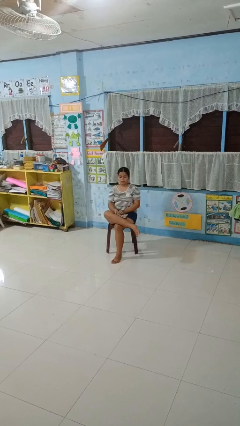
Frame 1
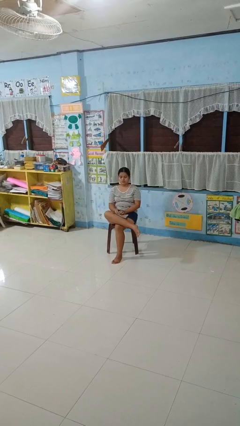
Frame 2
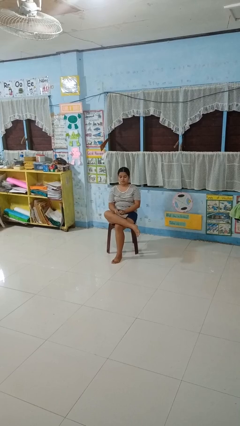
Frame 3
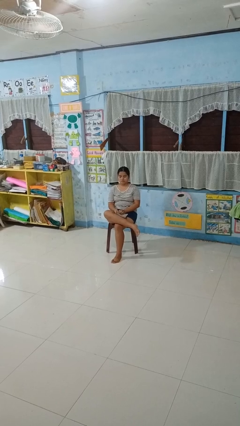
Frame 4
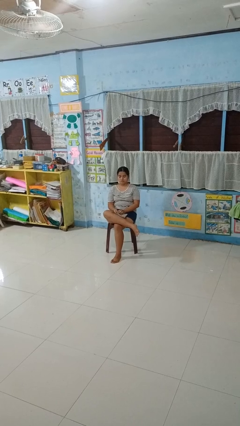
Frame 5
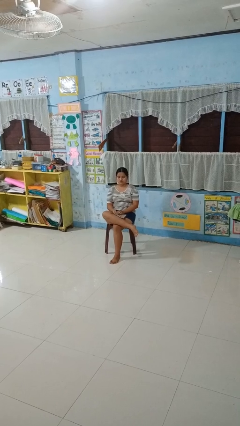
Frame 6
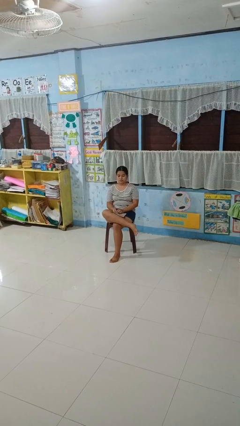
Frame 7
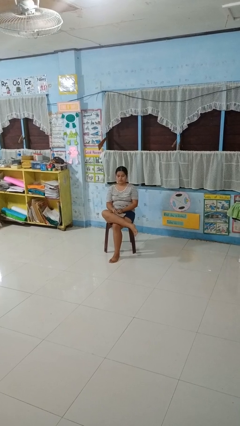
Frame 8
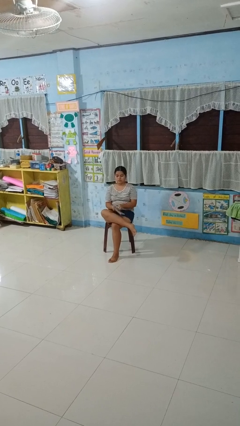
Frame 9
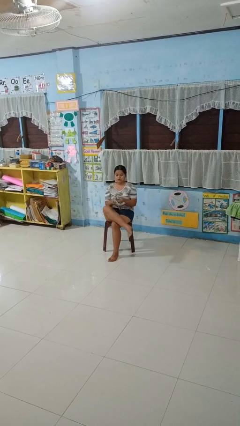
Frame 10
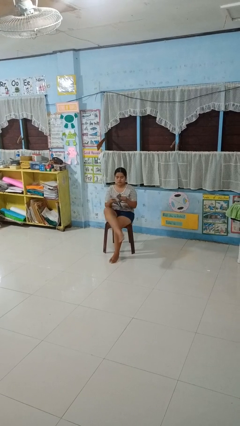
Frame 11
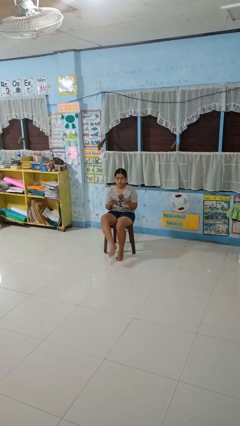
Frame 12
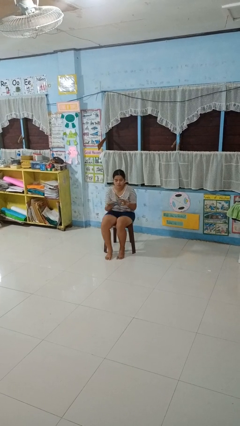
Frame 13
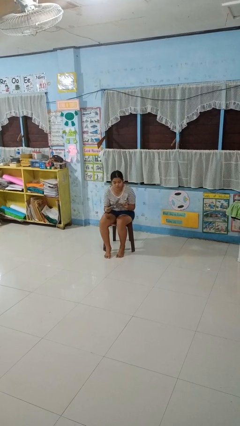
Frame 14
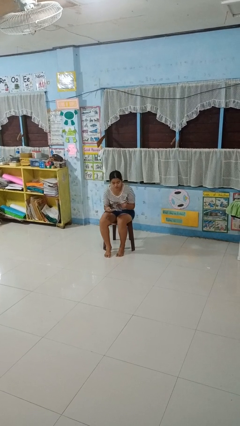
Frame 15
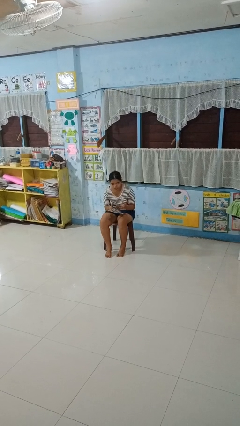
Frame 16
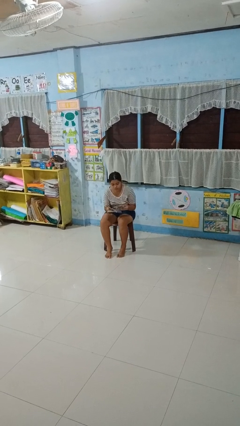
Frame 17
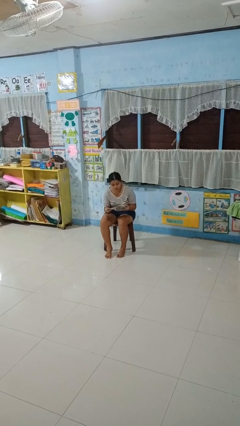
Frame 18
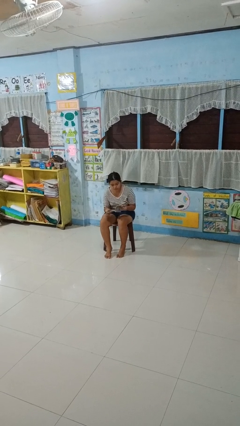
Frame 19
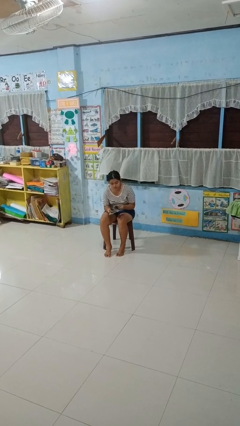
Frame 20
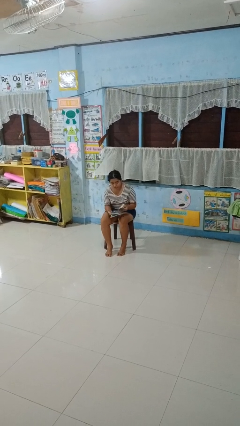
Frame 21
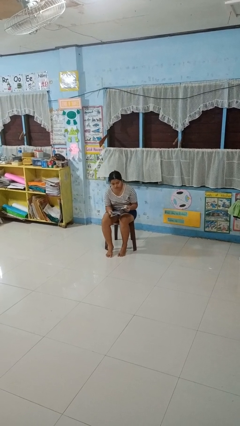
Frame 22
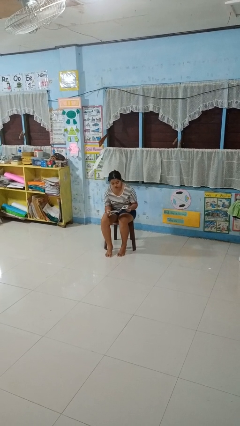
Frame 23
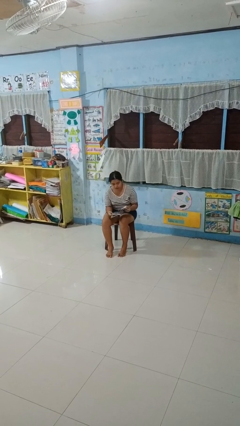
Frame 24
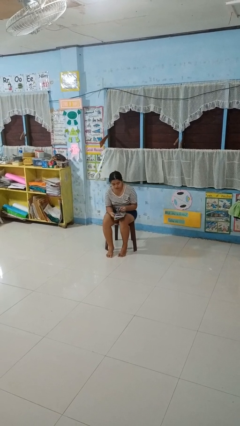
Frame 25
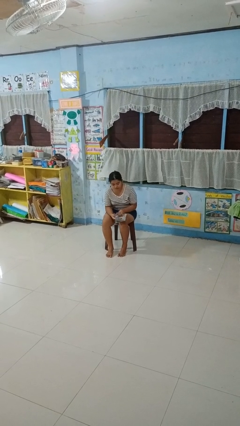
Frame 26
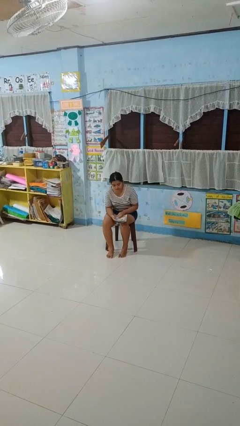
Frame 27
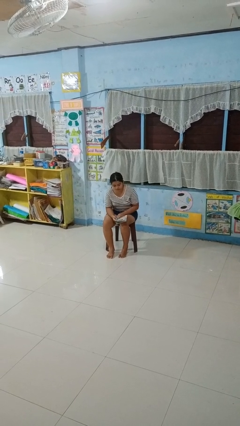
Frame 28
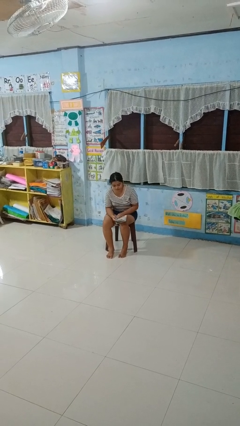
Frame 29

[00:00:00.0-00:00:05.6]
person reads magazine

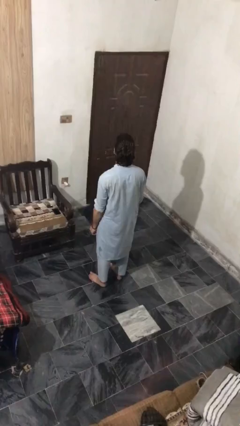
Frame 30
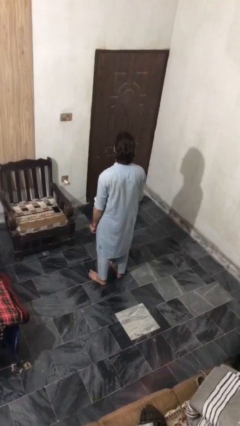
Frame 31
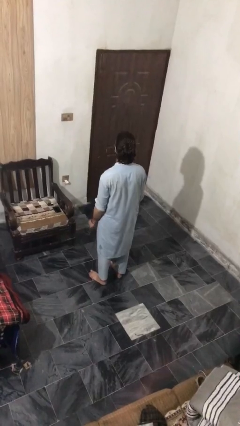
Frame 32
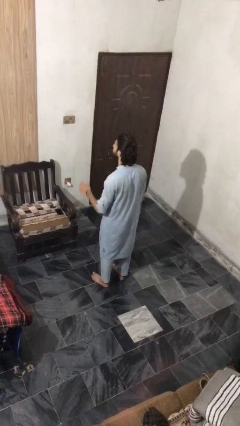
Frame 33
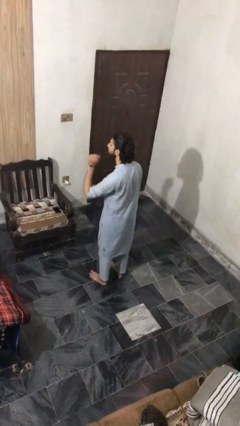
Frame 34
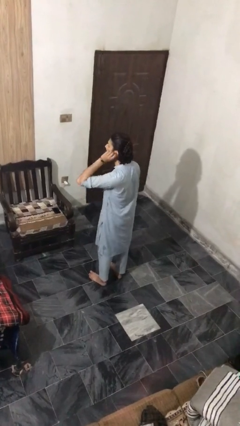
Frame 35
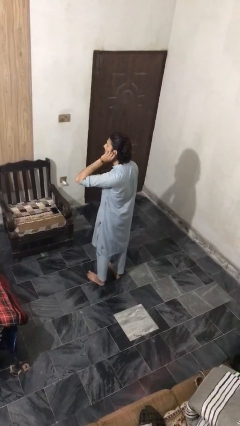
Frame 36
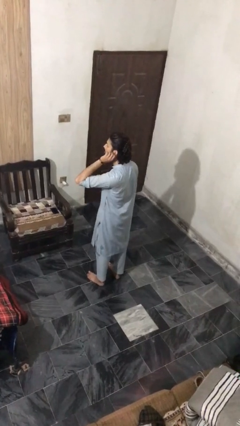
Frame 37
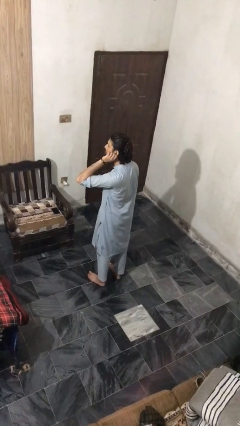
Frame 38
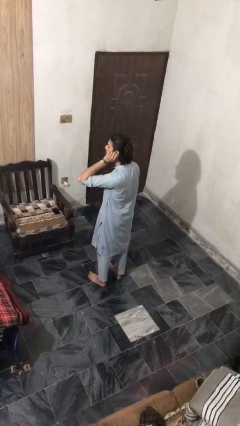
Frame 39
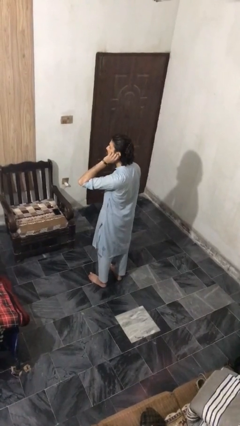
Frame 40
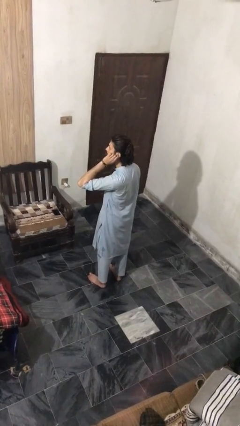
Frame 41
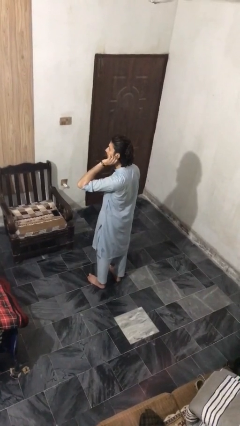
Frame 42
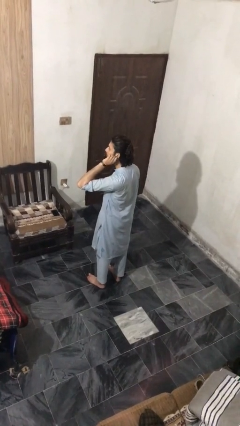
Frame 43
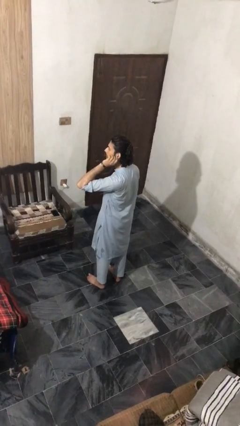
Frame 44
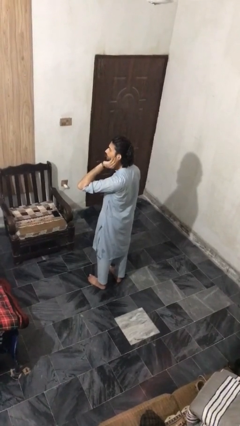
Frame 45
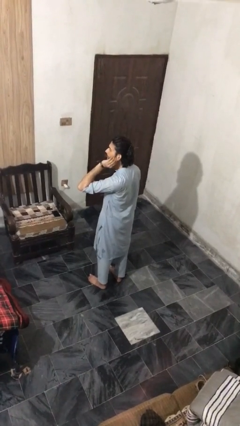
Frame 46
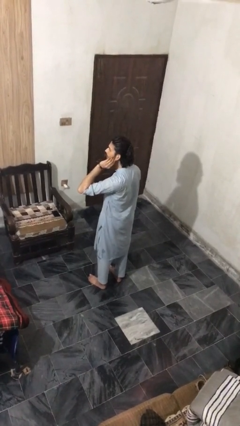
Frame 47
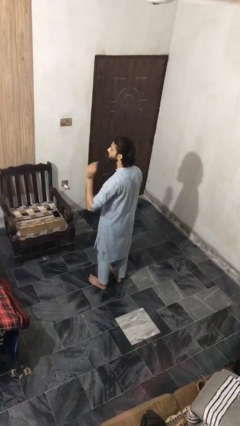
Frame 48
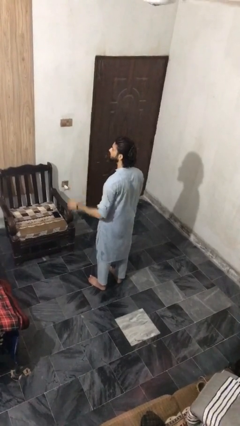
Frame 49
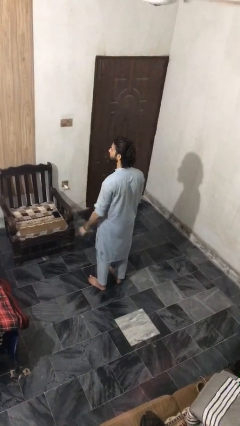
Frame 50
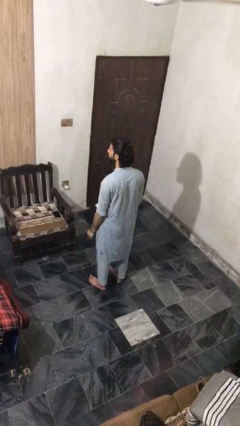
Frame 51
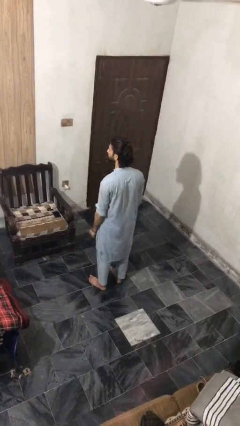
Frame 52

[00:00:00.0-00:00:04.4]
person touches earlobe

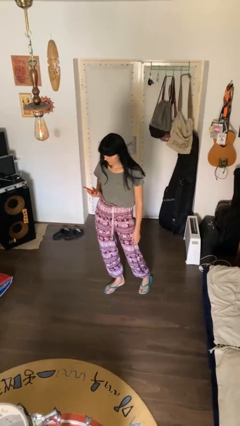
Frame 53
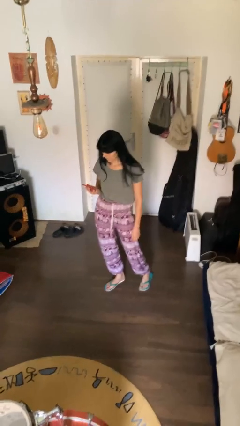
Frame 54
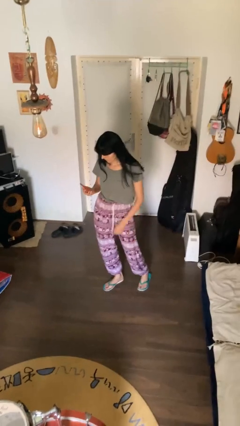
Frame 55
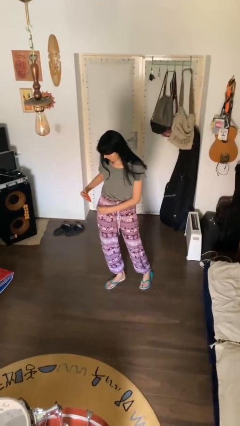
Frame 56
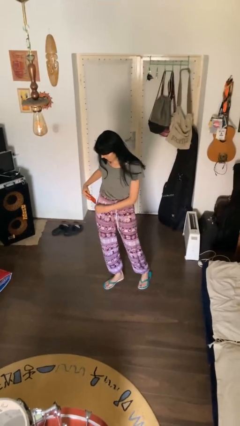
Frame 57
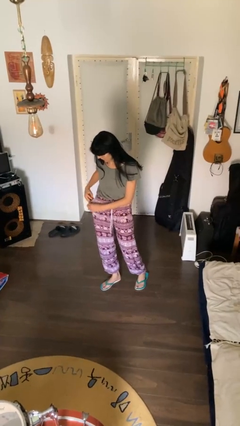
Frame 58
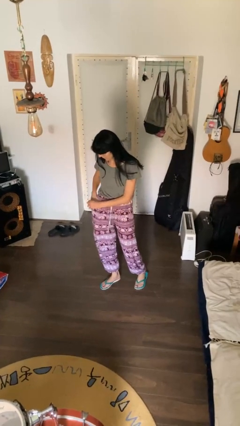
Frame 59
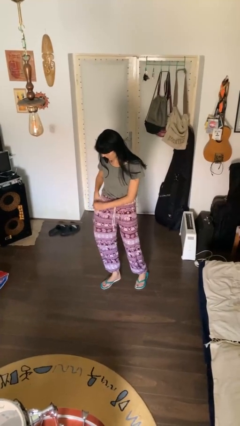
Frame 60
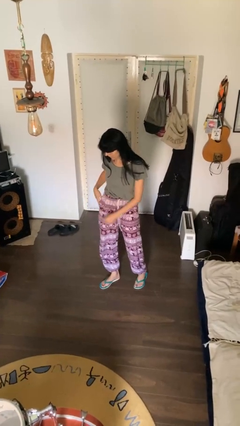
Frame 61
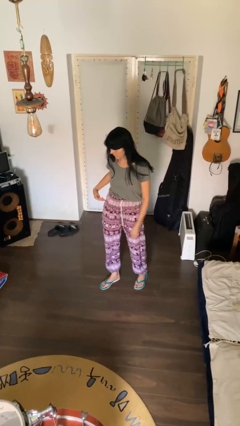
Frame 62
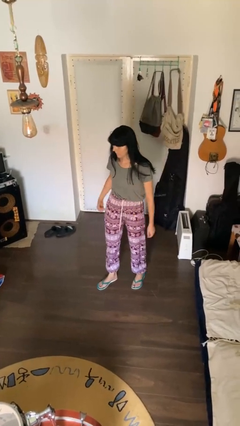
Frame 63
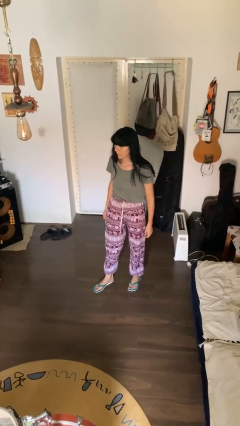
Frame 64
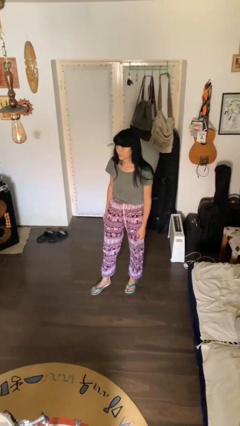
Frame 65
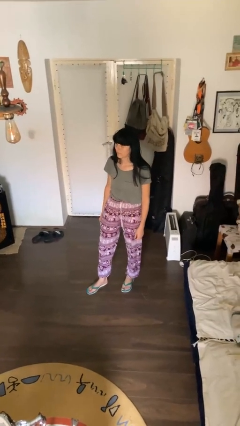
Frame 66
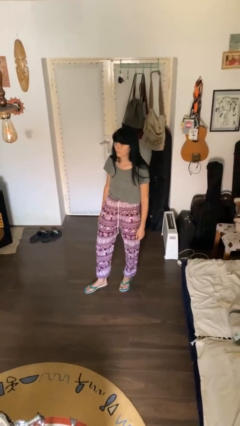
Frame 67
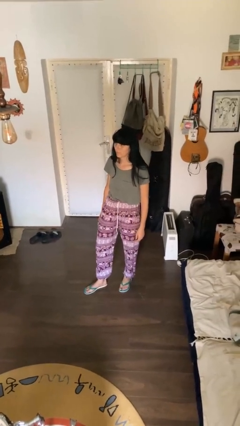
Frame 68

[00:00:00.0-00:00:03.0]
person puts phone into pocket

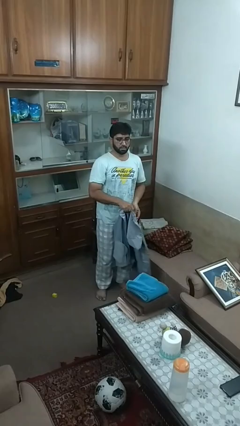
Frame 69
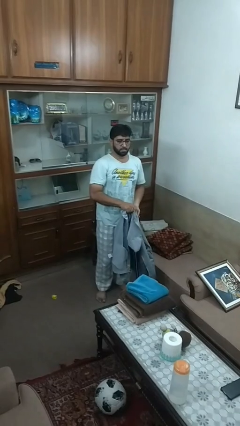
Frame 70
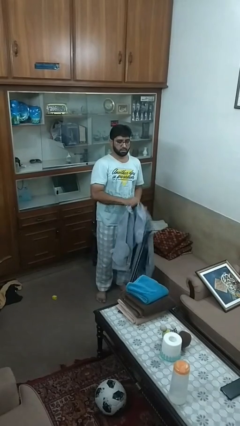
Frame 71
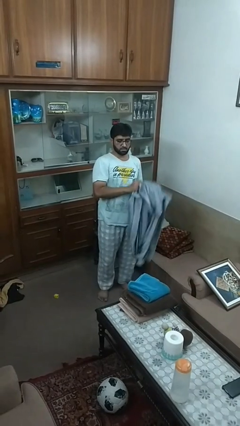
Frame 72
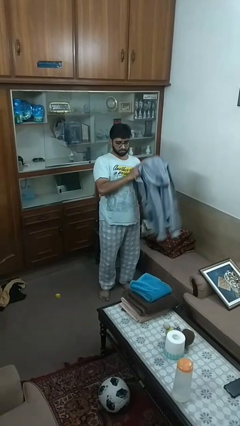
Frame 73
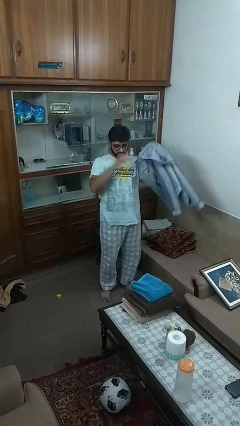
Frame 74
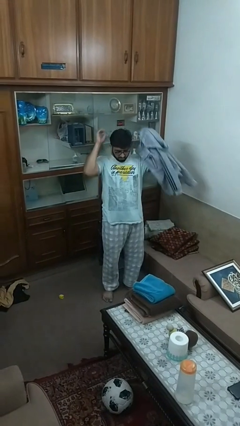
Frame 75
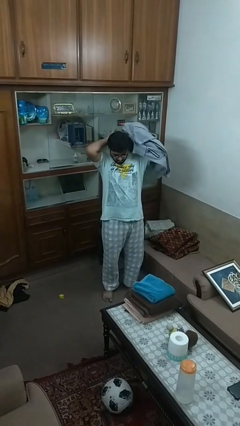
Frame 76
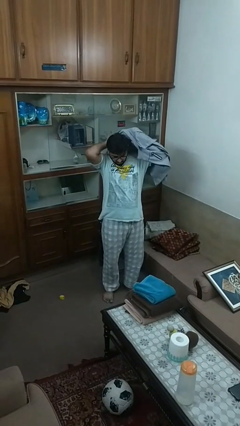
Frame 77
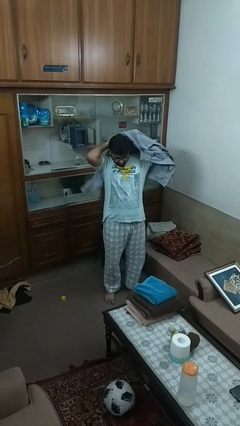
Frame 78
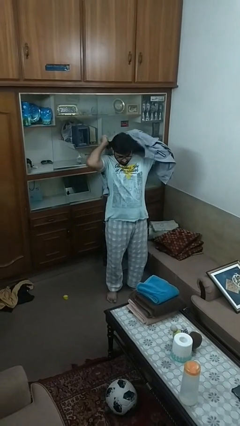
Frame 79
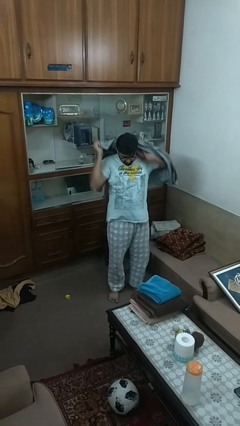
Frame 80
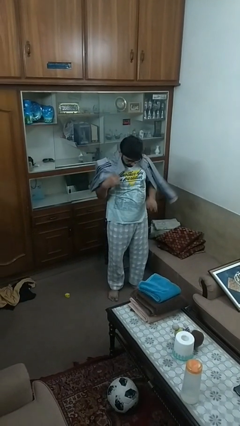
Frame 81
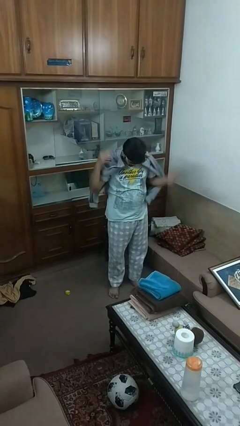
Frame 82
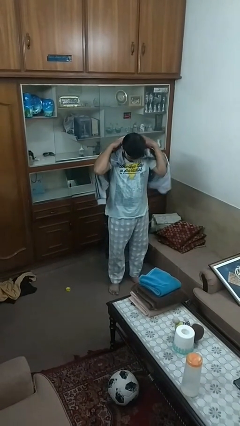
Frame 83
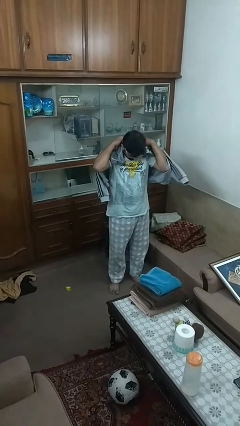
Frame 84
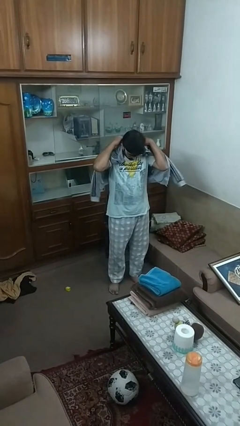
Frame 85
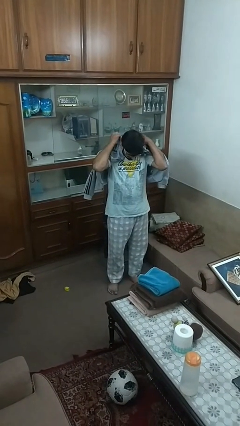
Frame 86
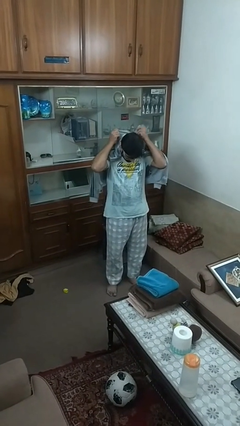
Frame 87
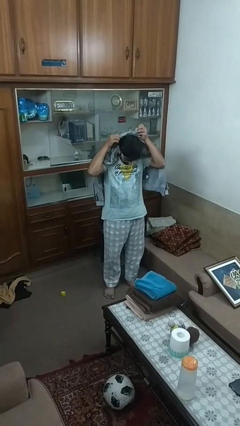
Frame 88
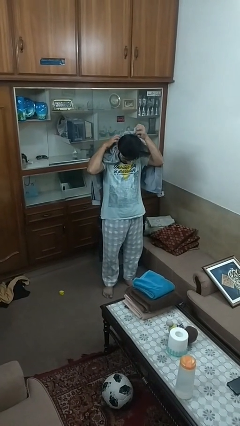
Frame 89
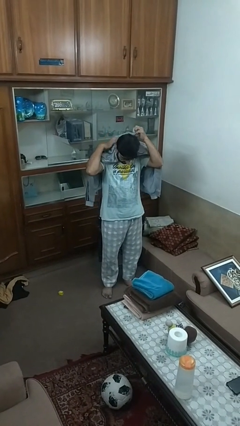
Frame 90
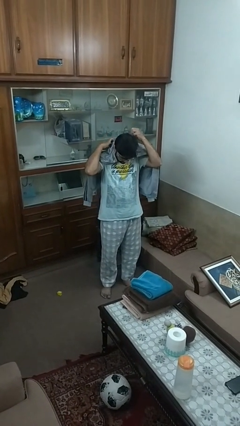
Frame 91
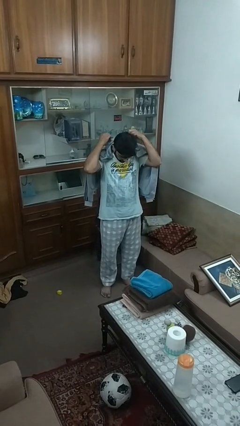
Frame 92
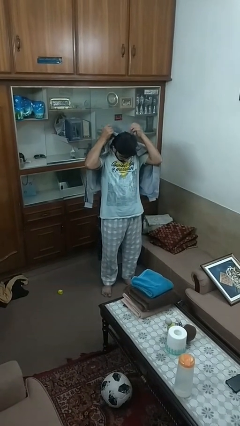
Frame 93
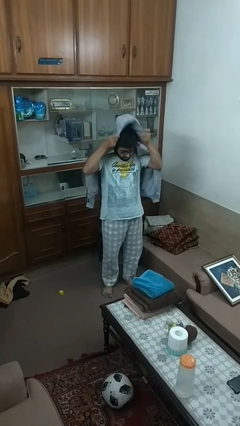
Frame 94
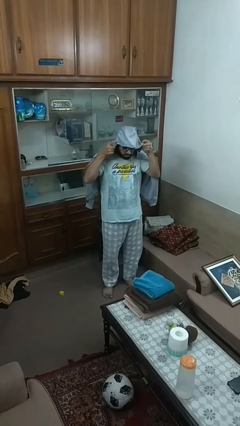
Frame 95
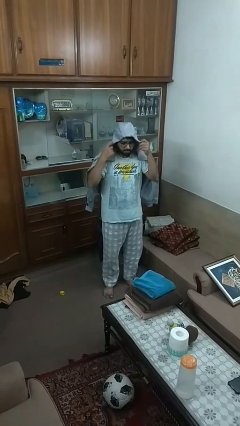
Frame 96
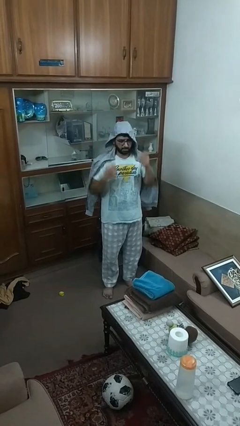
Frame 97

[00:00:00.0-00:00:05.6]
person puts on hoodie
